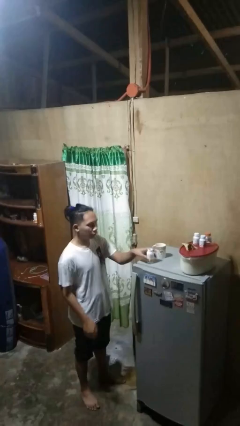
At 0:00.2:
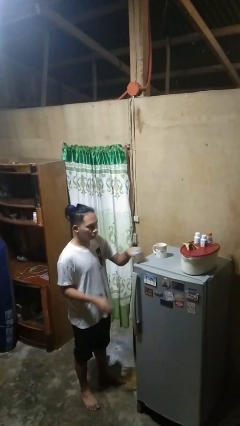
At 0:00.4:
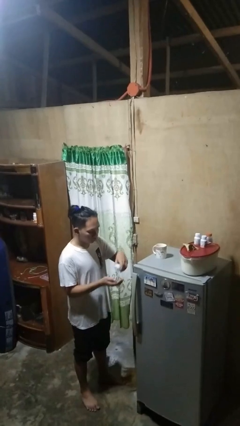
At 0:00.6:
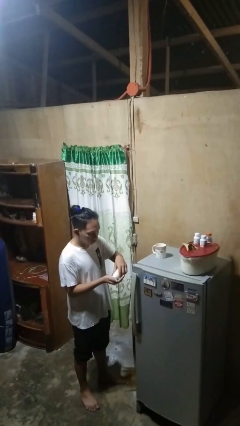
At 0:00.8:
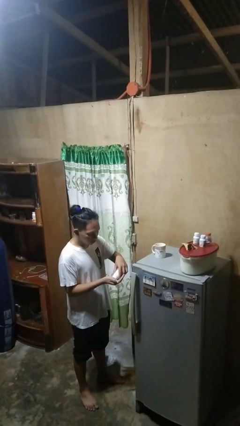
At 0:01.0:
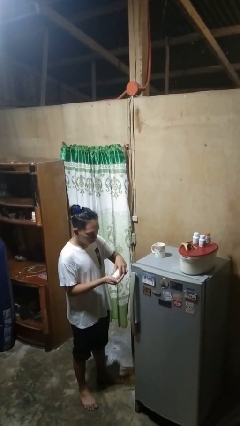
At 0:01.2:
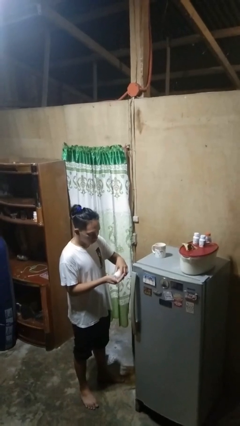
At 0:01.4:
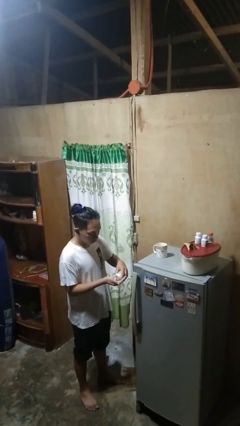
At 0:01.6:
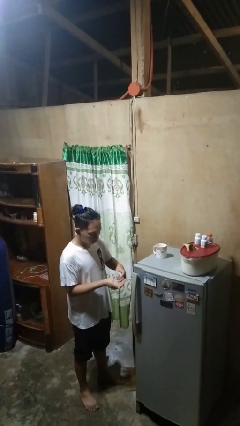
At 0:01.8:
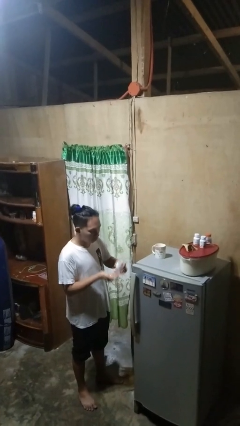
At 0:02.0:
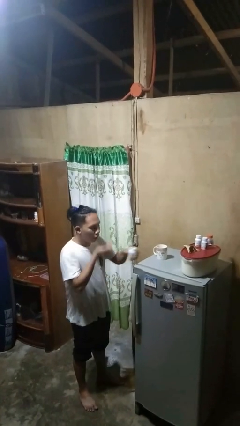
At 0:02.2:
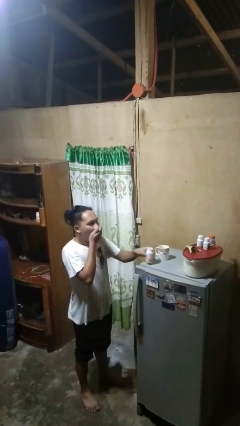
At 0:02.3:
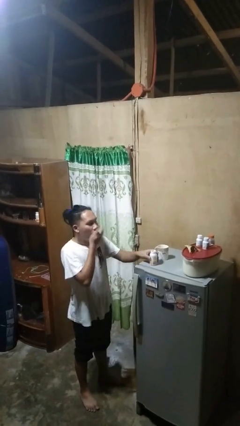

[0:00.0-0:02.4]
person takes medicine pills

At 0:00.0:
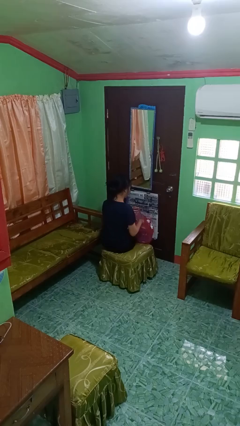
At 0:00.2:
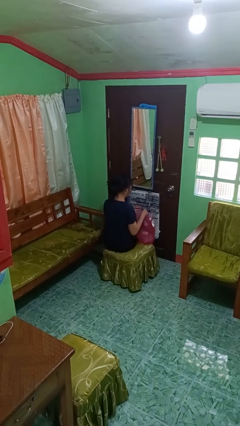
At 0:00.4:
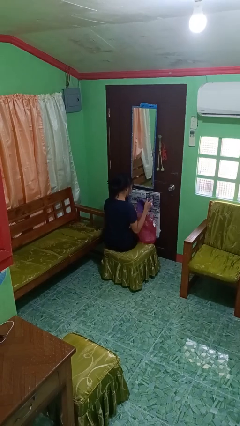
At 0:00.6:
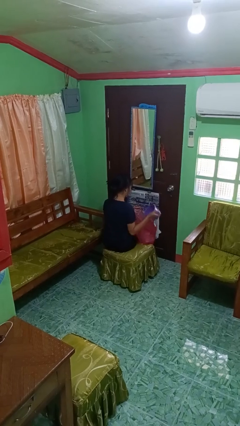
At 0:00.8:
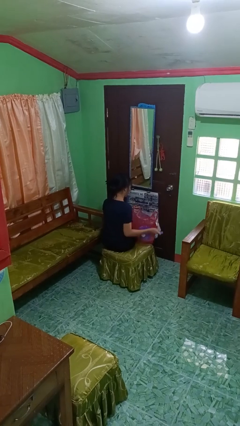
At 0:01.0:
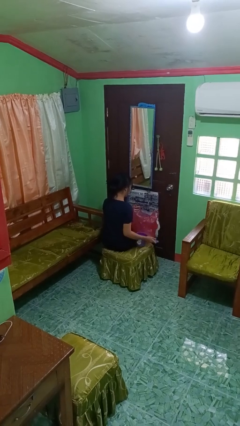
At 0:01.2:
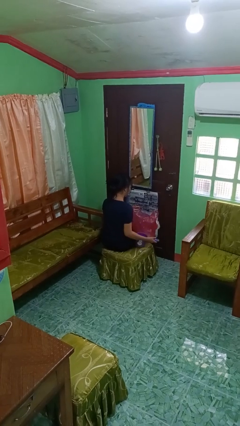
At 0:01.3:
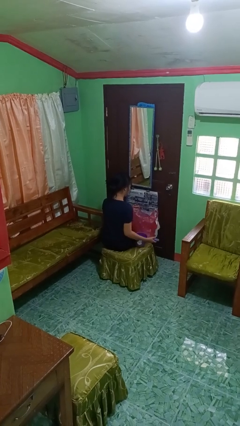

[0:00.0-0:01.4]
person takes object from bag

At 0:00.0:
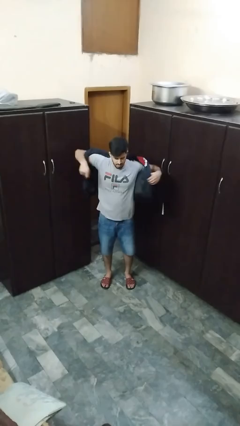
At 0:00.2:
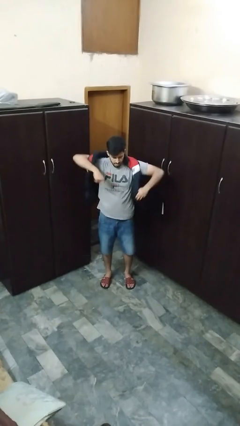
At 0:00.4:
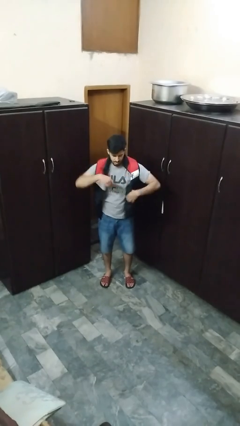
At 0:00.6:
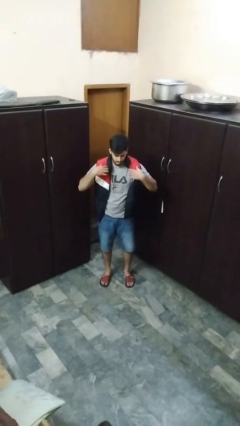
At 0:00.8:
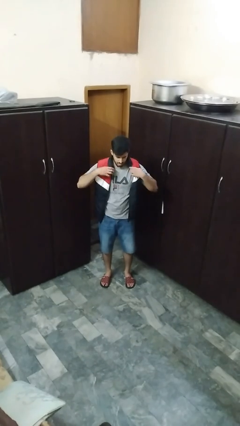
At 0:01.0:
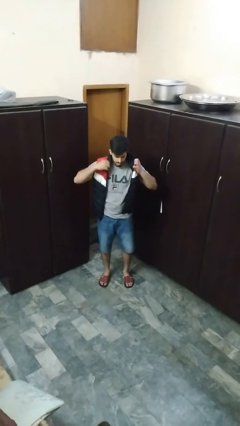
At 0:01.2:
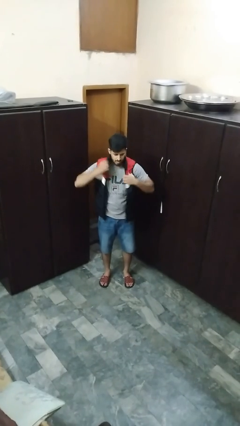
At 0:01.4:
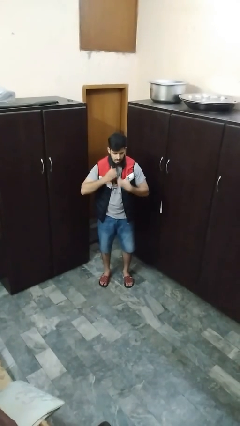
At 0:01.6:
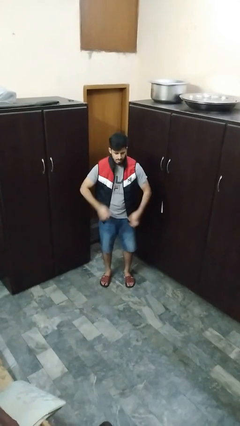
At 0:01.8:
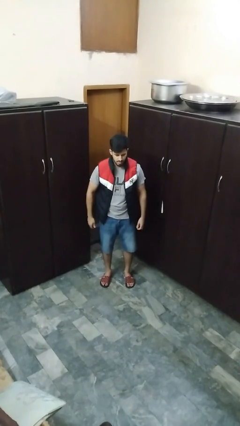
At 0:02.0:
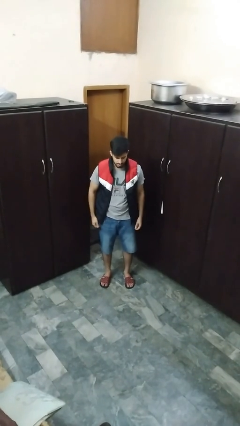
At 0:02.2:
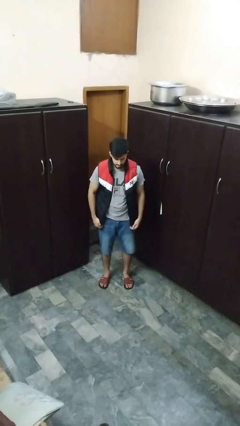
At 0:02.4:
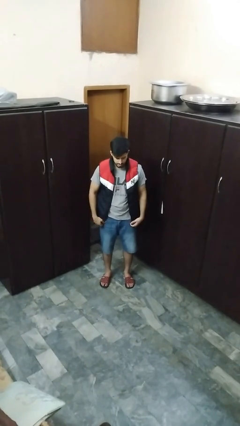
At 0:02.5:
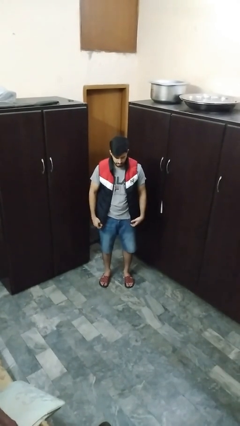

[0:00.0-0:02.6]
person puts on jacket

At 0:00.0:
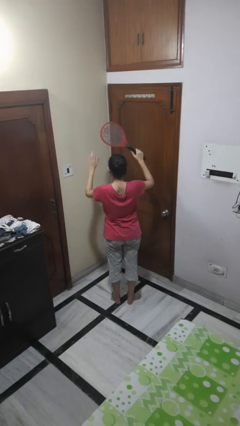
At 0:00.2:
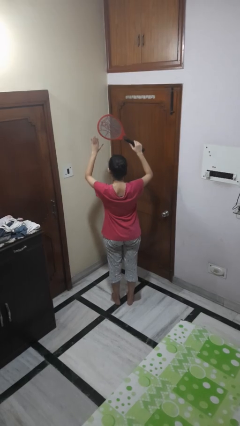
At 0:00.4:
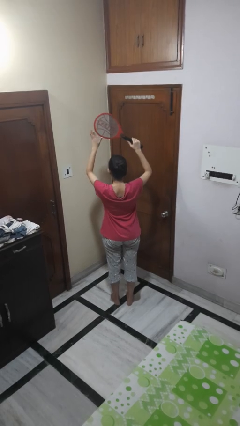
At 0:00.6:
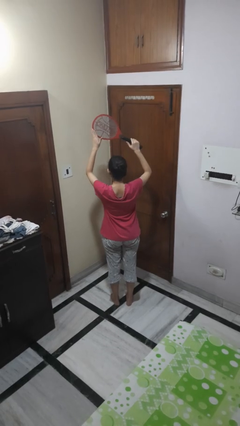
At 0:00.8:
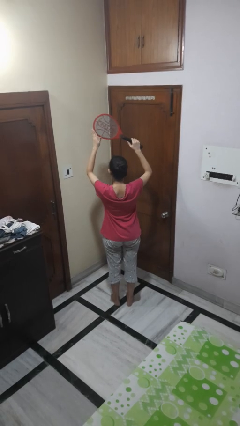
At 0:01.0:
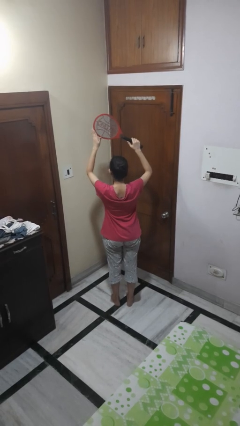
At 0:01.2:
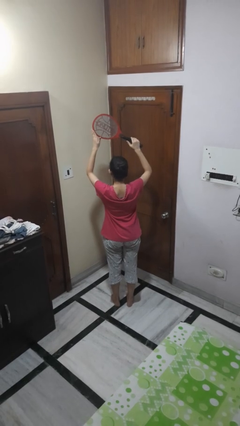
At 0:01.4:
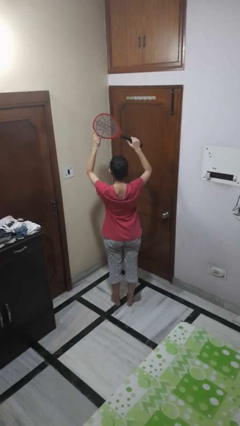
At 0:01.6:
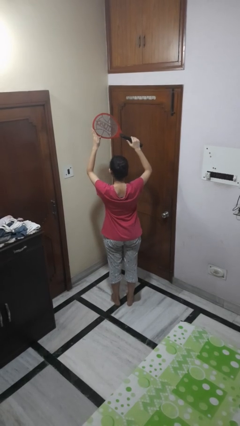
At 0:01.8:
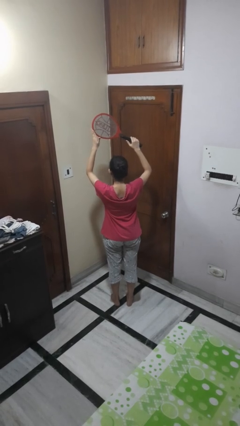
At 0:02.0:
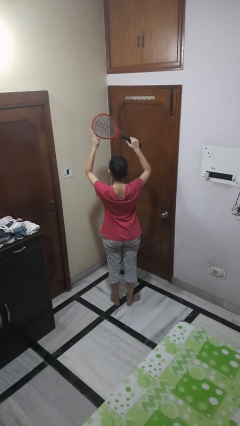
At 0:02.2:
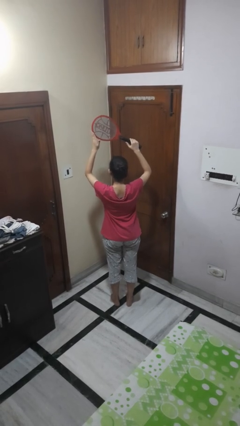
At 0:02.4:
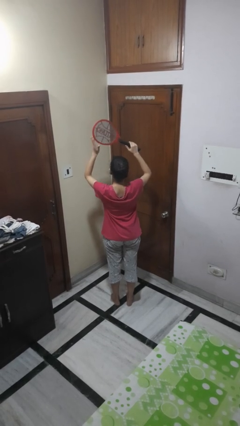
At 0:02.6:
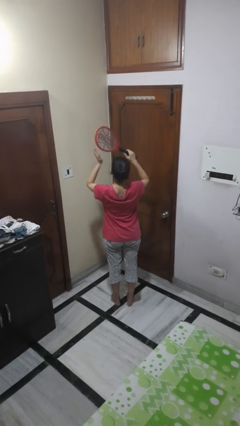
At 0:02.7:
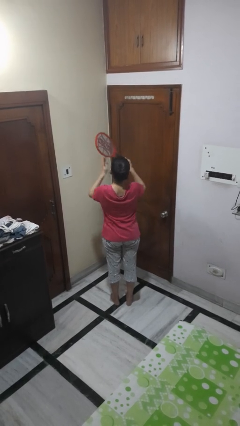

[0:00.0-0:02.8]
person holds object above head

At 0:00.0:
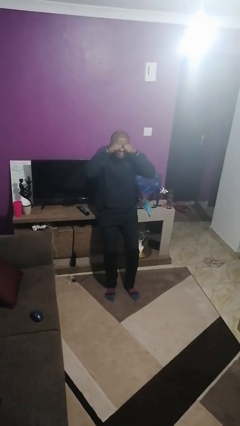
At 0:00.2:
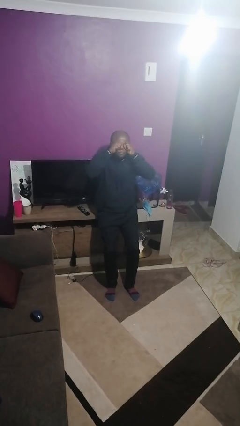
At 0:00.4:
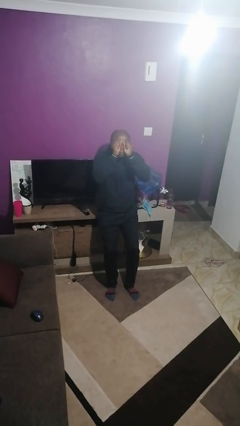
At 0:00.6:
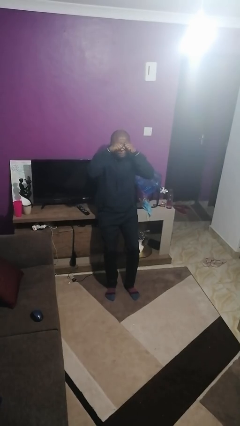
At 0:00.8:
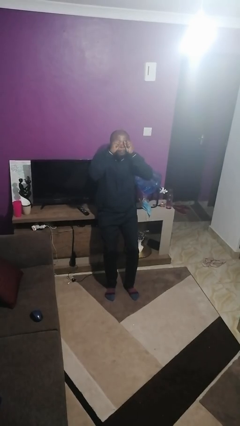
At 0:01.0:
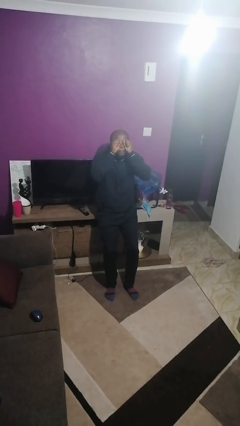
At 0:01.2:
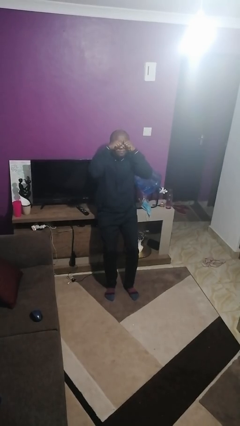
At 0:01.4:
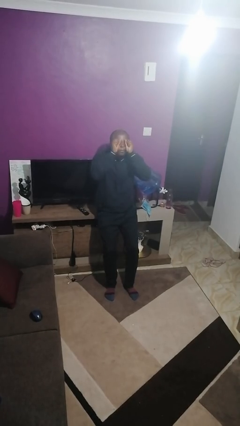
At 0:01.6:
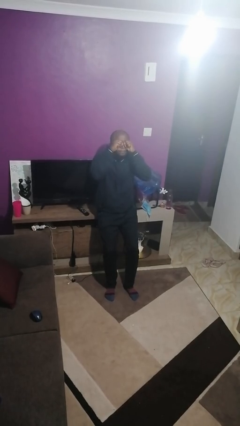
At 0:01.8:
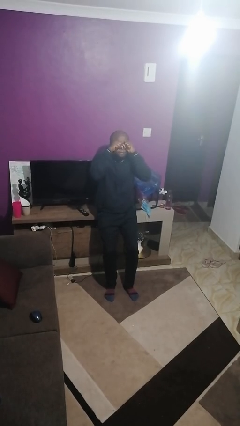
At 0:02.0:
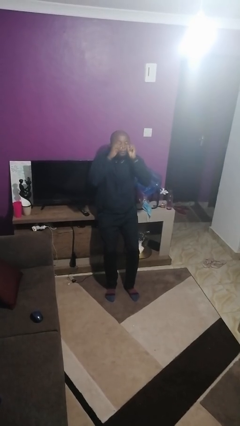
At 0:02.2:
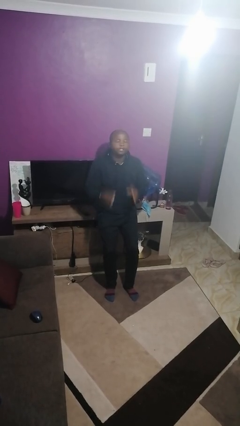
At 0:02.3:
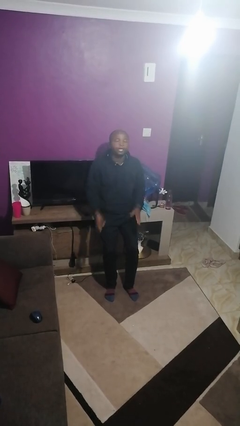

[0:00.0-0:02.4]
person rubs eyes

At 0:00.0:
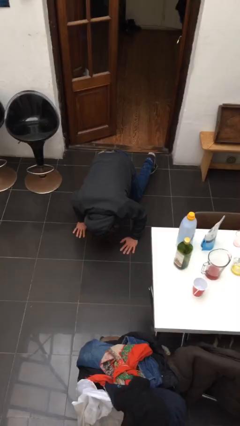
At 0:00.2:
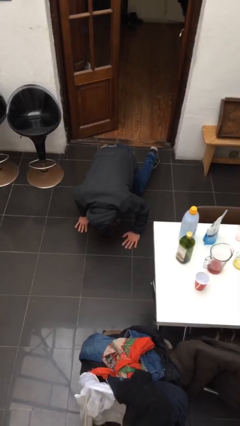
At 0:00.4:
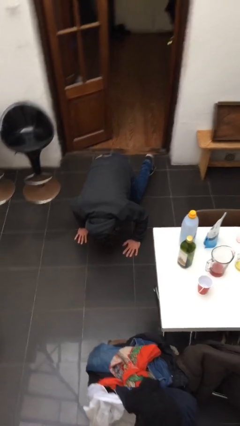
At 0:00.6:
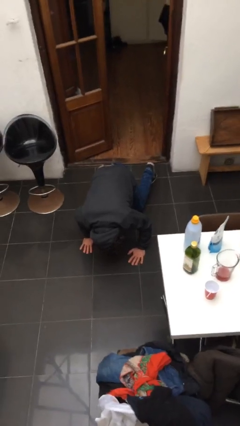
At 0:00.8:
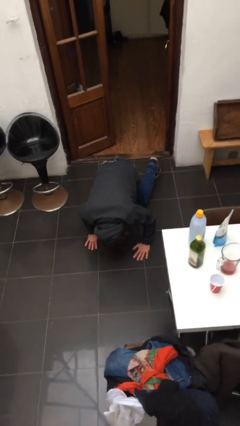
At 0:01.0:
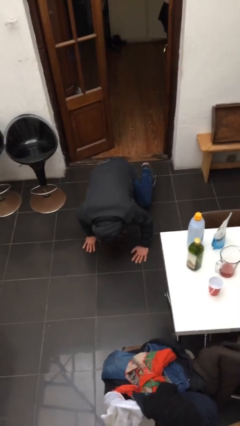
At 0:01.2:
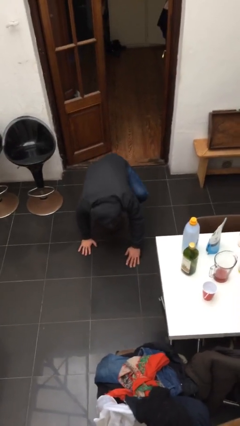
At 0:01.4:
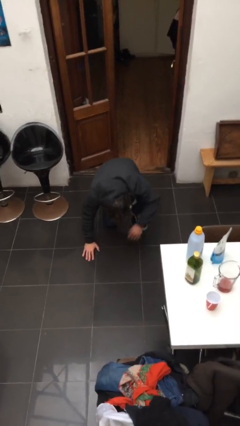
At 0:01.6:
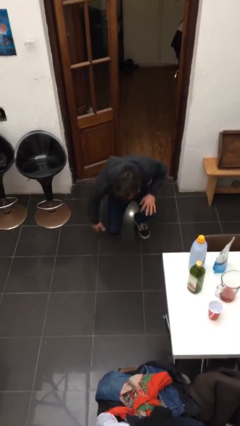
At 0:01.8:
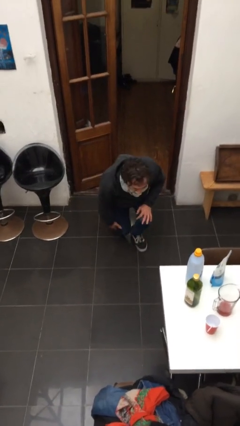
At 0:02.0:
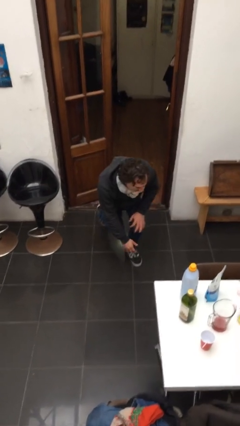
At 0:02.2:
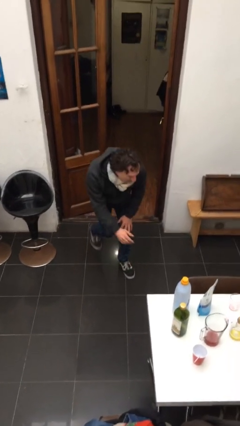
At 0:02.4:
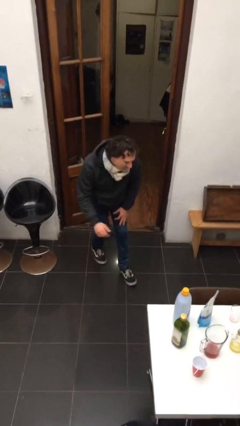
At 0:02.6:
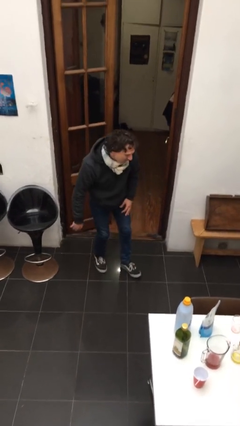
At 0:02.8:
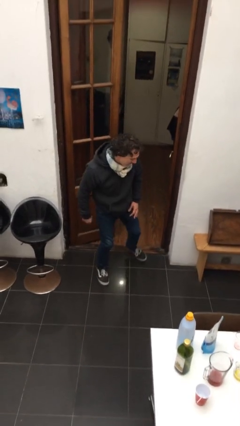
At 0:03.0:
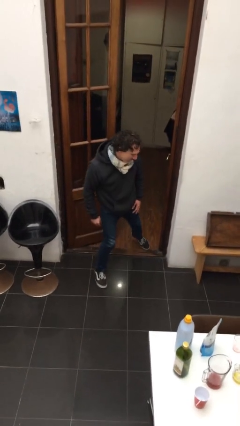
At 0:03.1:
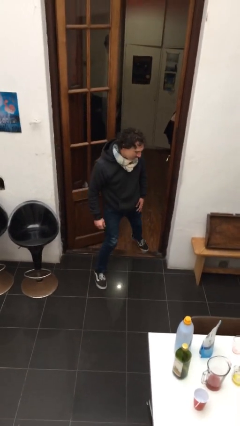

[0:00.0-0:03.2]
person stands up from floor

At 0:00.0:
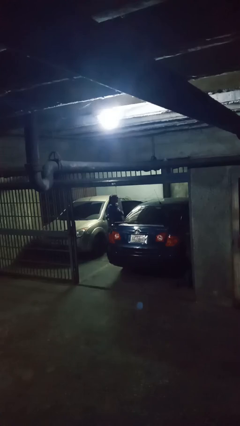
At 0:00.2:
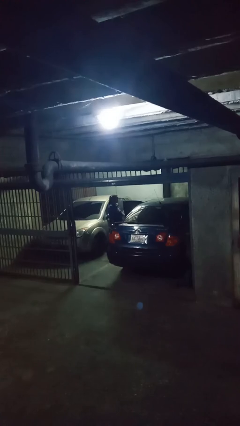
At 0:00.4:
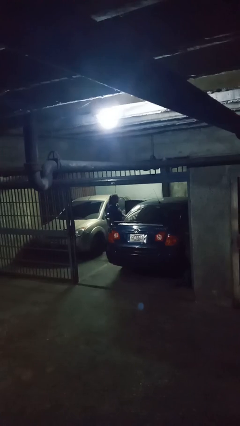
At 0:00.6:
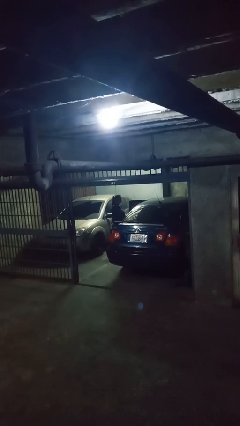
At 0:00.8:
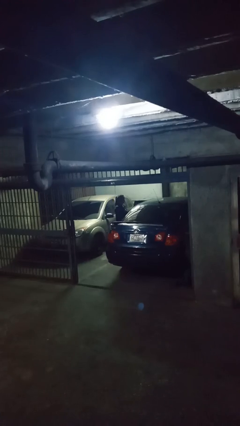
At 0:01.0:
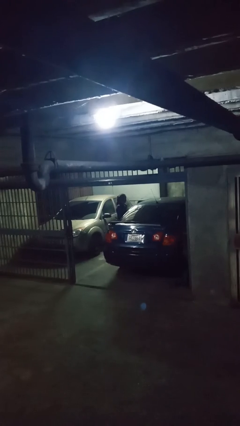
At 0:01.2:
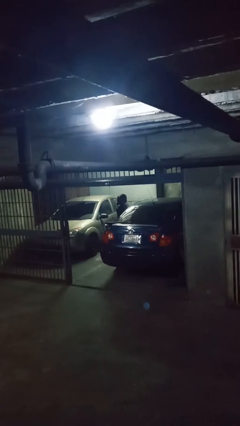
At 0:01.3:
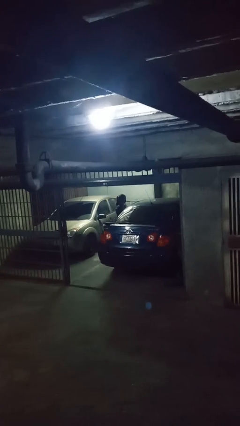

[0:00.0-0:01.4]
person closes car door

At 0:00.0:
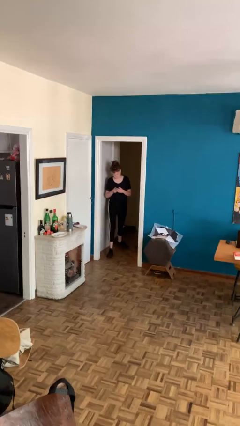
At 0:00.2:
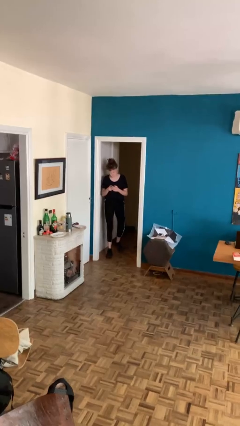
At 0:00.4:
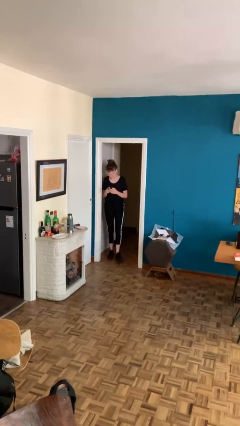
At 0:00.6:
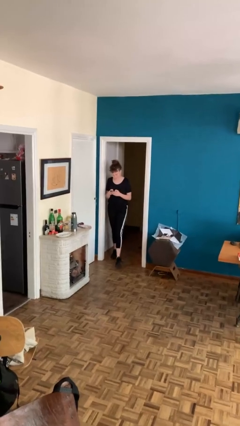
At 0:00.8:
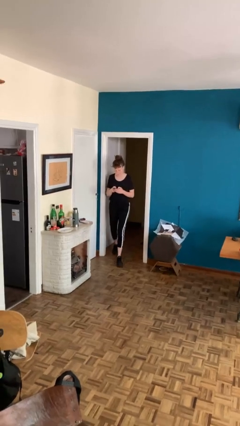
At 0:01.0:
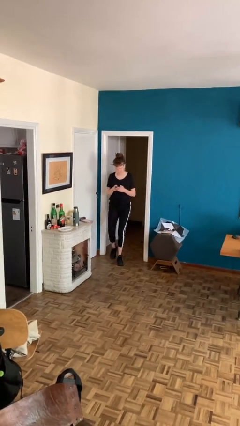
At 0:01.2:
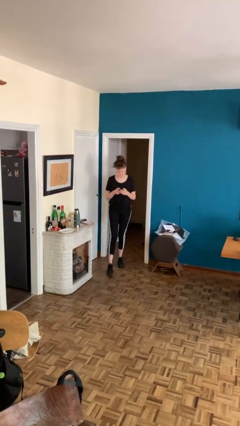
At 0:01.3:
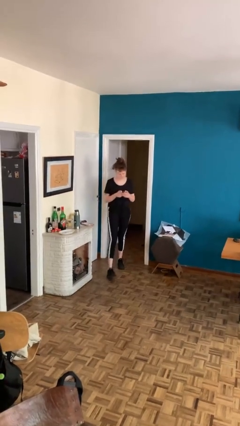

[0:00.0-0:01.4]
person enters scene through structure
